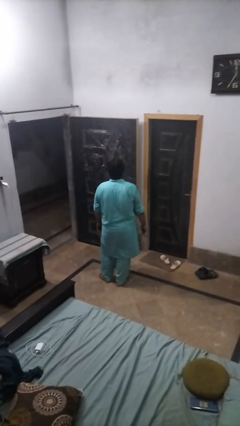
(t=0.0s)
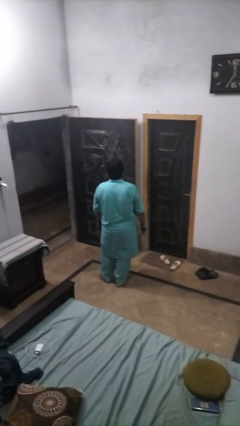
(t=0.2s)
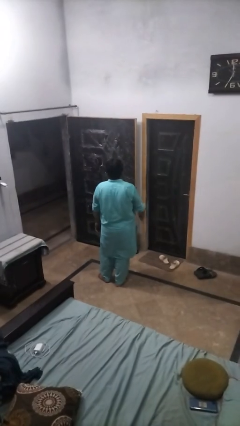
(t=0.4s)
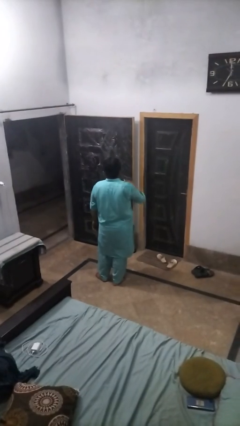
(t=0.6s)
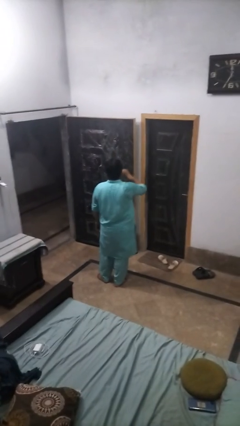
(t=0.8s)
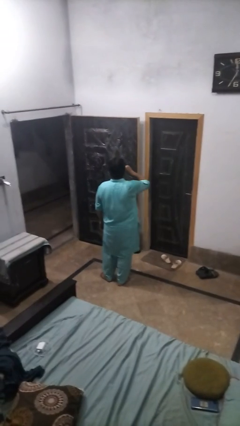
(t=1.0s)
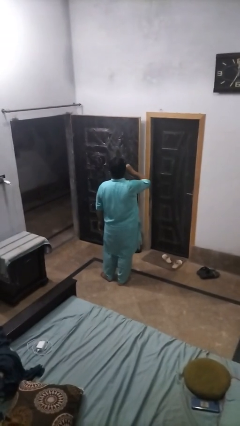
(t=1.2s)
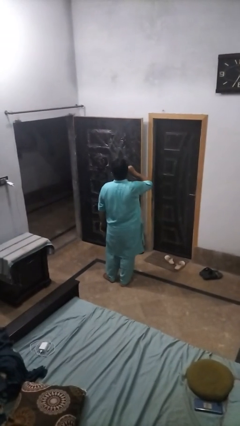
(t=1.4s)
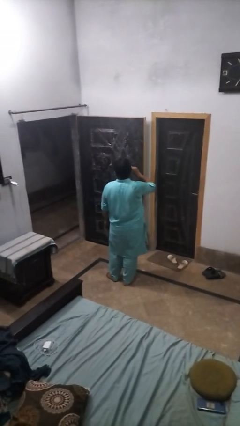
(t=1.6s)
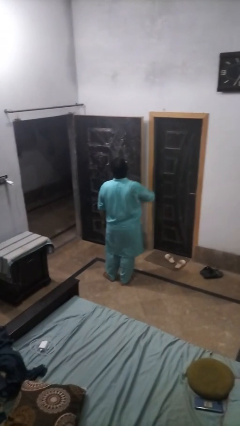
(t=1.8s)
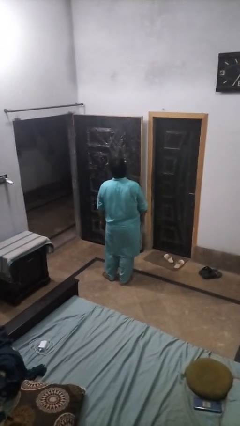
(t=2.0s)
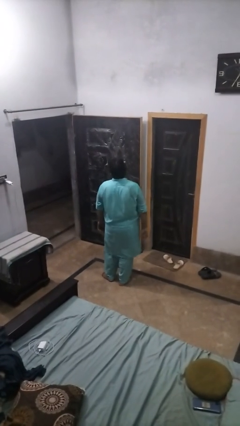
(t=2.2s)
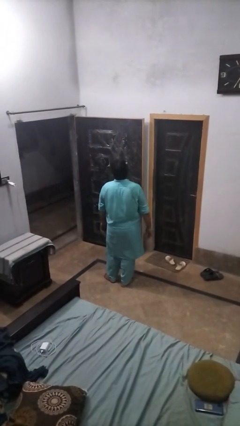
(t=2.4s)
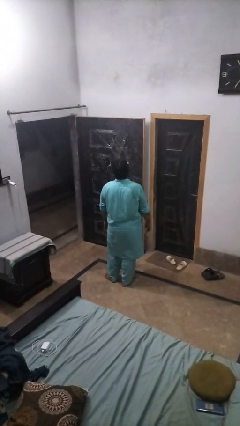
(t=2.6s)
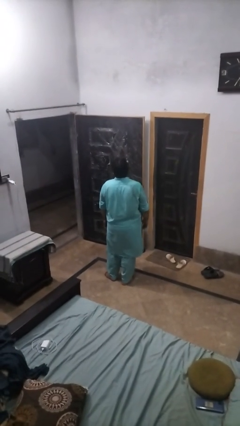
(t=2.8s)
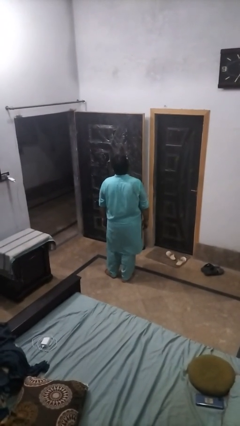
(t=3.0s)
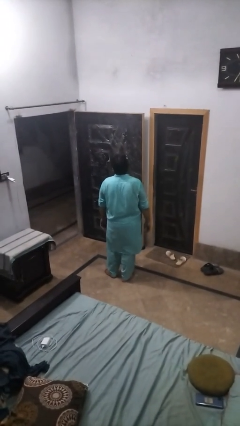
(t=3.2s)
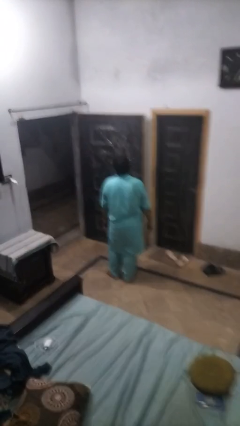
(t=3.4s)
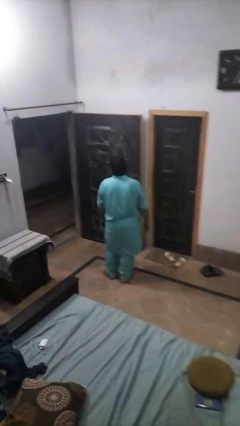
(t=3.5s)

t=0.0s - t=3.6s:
person vapes

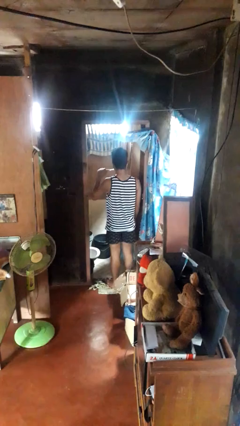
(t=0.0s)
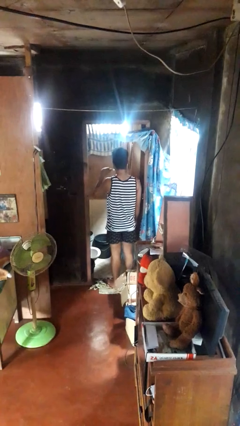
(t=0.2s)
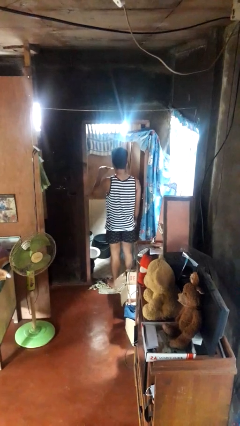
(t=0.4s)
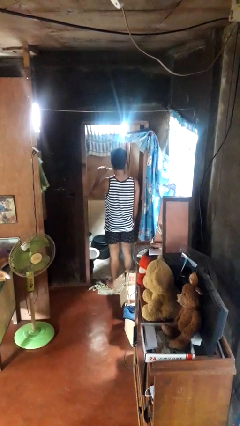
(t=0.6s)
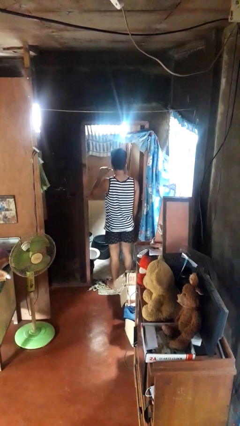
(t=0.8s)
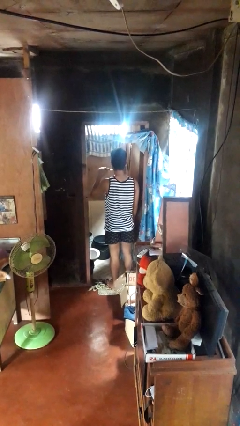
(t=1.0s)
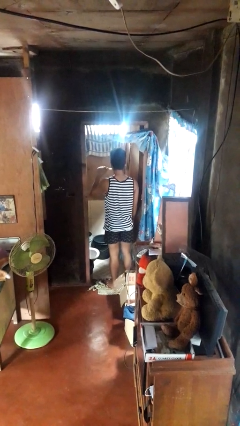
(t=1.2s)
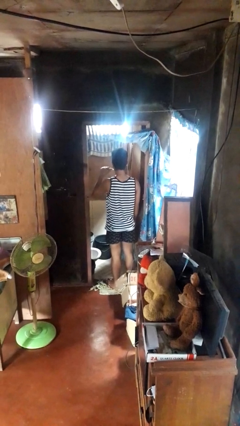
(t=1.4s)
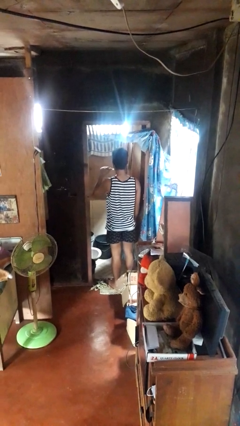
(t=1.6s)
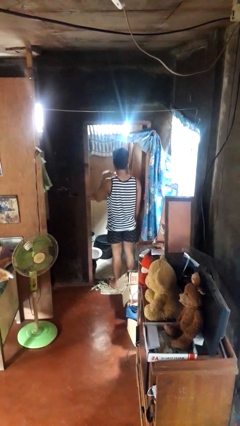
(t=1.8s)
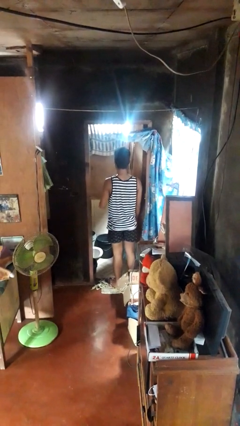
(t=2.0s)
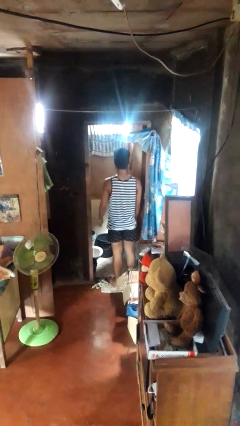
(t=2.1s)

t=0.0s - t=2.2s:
person brushes teeth

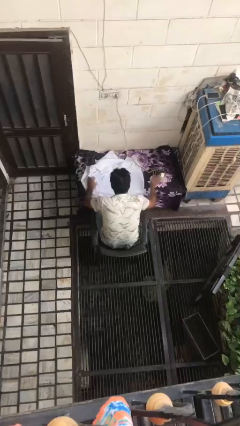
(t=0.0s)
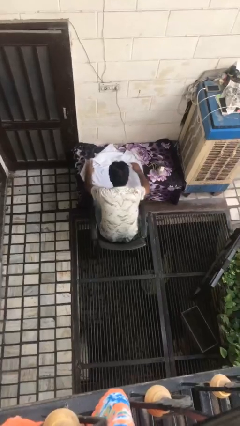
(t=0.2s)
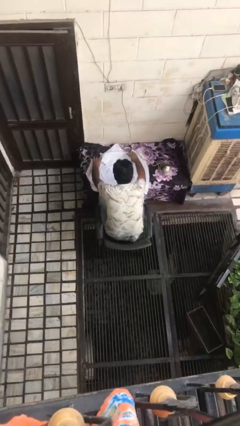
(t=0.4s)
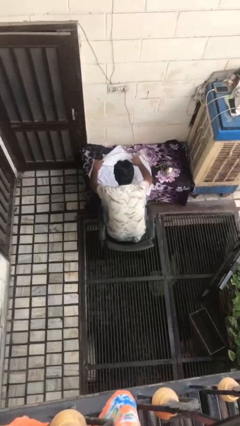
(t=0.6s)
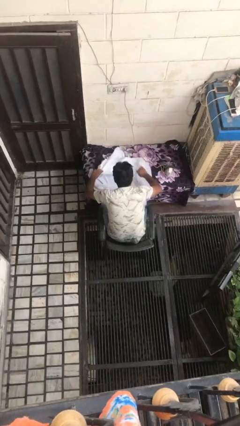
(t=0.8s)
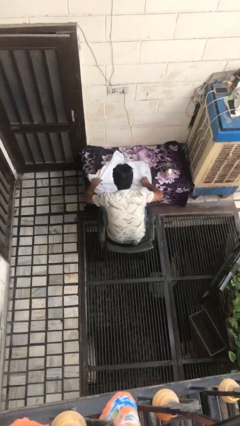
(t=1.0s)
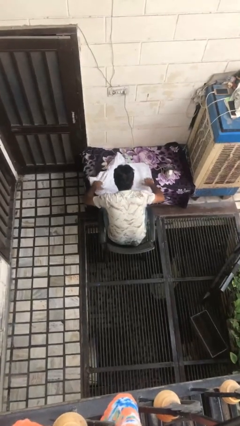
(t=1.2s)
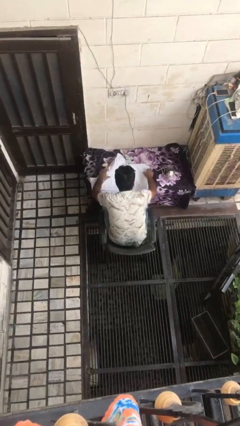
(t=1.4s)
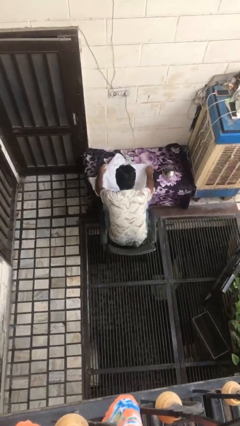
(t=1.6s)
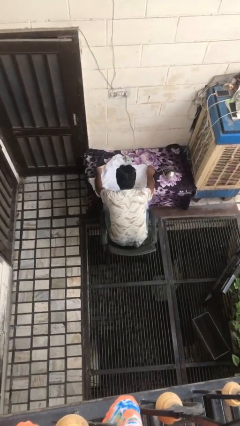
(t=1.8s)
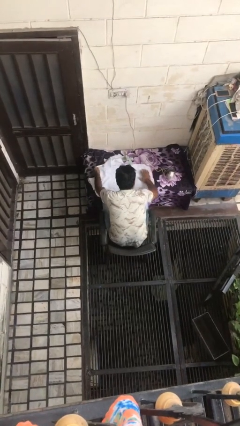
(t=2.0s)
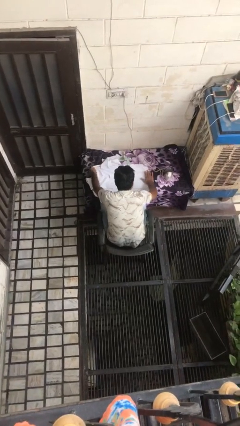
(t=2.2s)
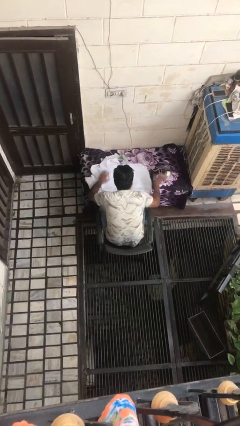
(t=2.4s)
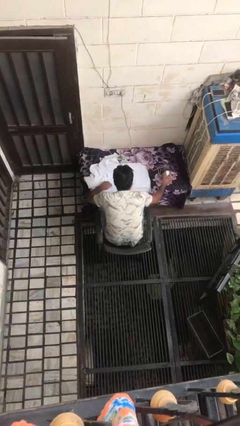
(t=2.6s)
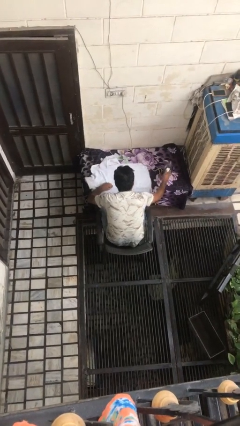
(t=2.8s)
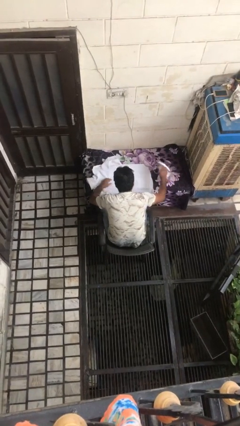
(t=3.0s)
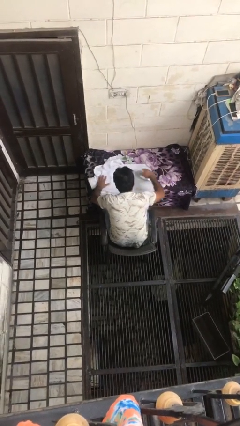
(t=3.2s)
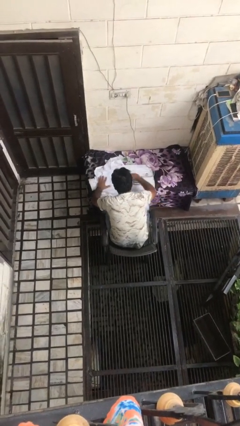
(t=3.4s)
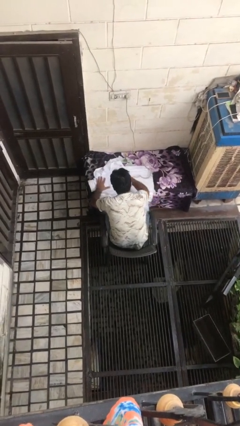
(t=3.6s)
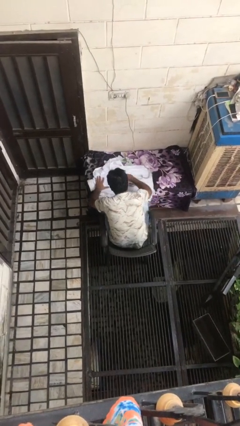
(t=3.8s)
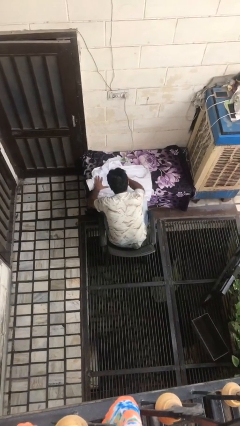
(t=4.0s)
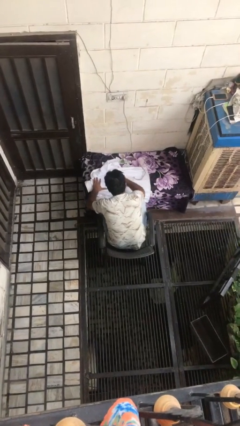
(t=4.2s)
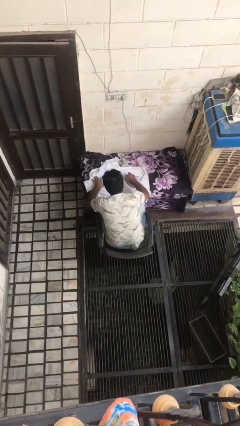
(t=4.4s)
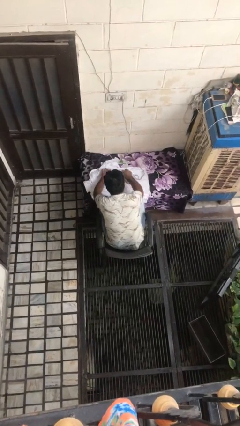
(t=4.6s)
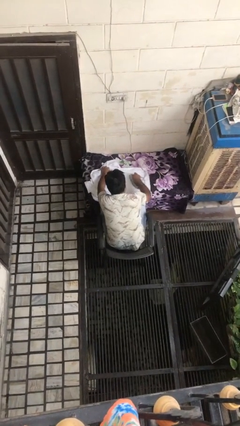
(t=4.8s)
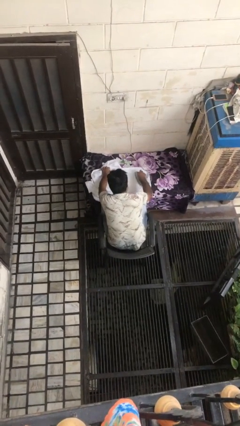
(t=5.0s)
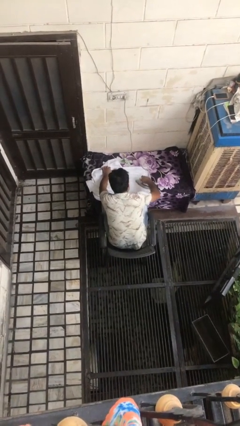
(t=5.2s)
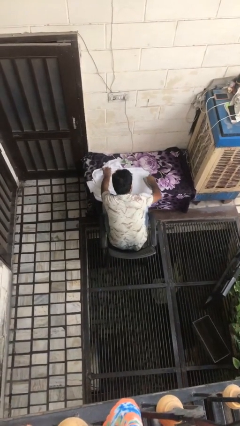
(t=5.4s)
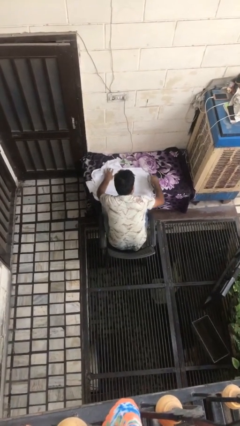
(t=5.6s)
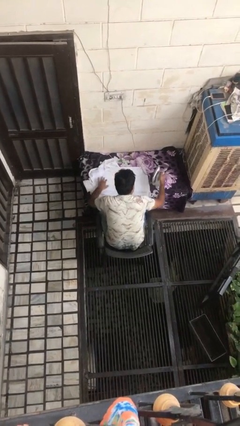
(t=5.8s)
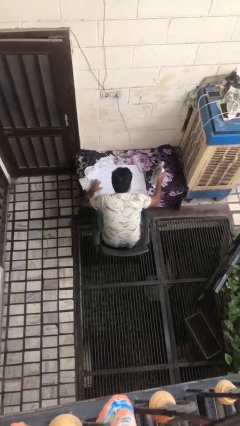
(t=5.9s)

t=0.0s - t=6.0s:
person irons clothes

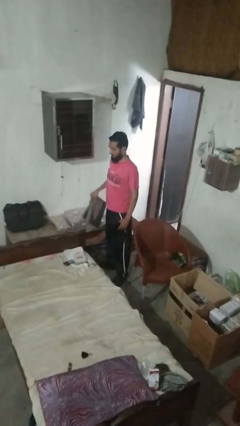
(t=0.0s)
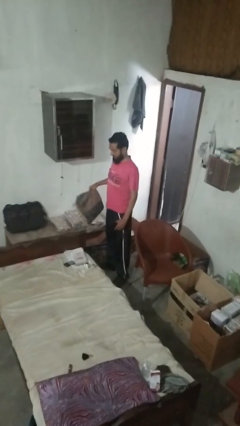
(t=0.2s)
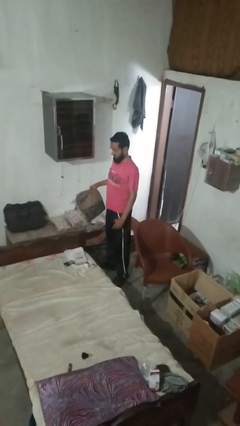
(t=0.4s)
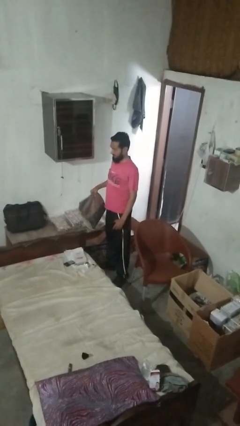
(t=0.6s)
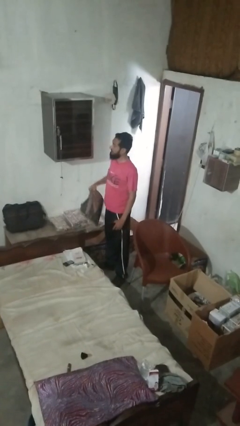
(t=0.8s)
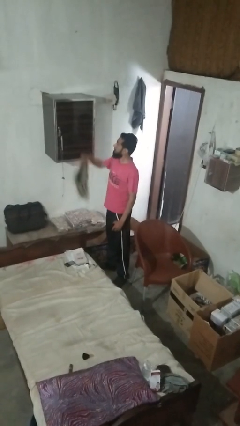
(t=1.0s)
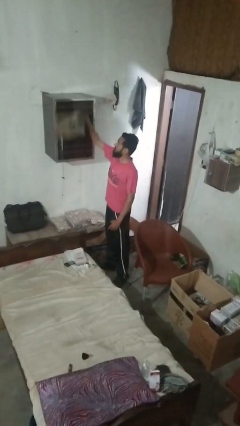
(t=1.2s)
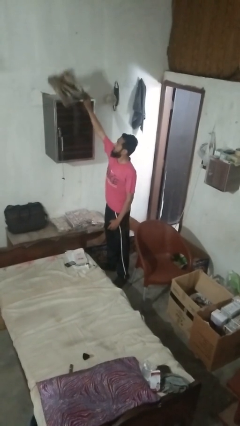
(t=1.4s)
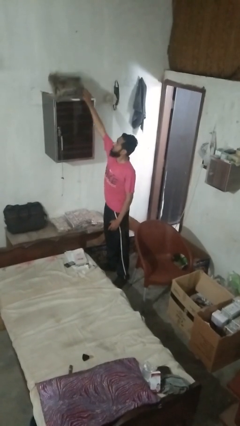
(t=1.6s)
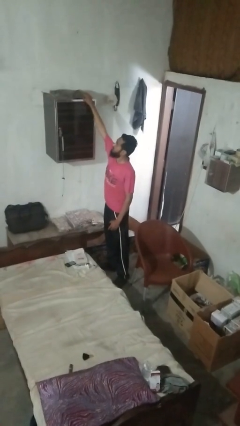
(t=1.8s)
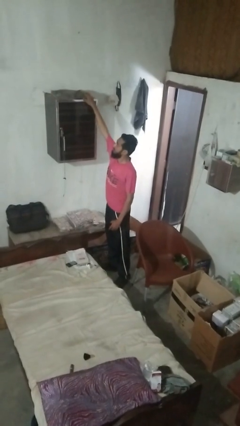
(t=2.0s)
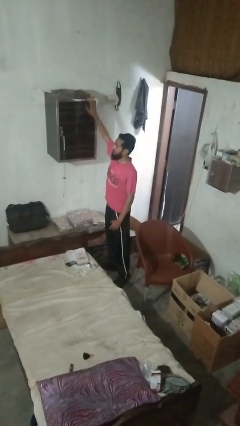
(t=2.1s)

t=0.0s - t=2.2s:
person puts down object on shelf

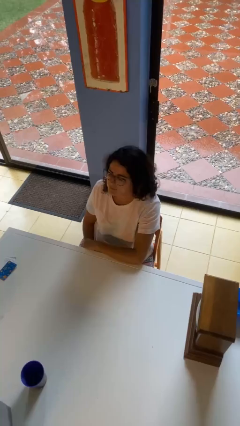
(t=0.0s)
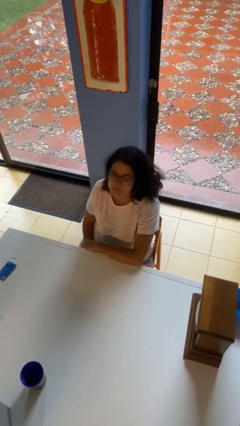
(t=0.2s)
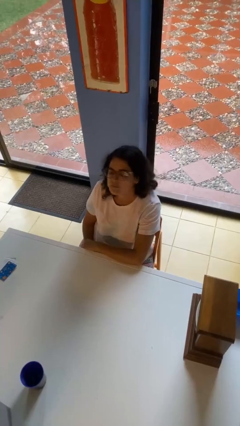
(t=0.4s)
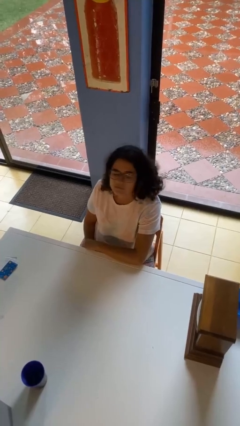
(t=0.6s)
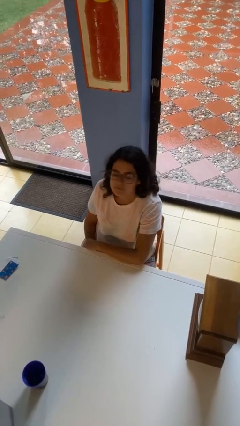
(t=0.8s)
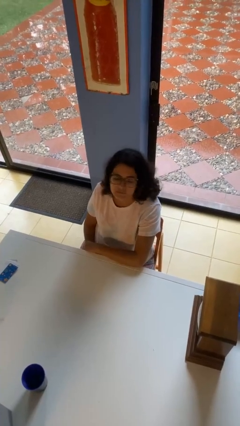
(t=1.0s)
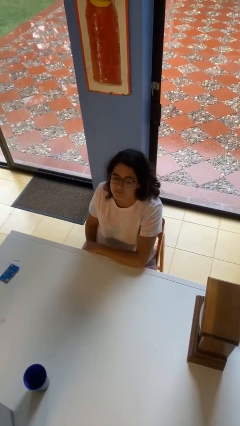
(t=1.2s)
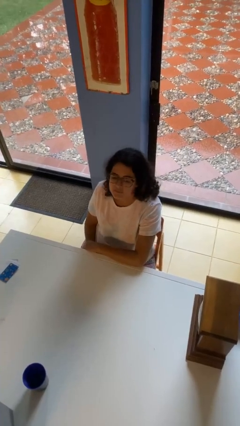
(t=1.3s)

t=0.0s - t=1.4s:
person shakes head

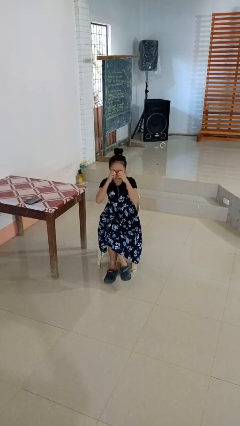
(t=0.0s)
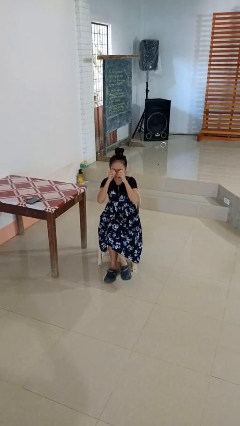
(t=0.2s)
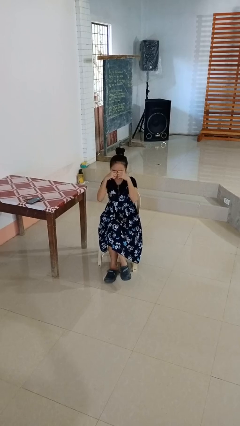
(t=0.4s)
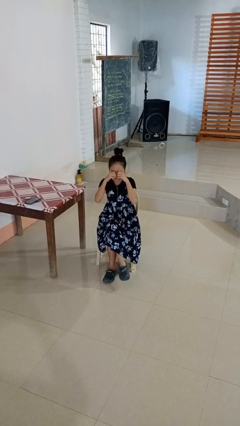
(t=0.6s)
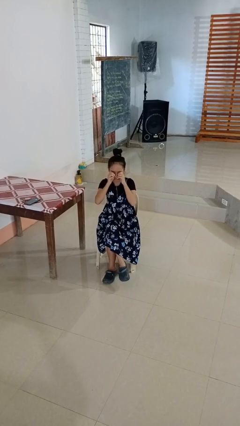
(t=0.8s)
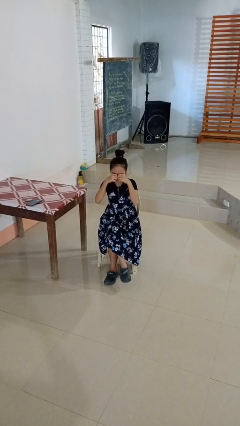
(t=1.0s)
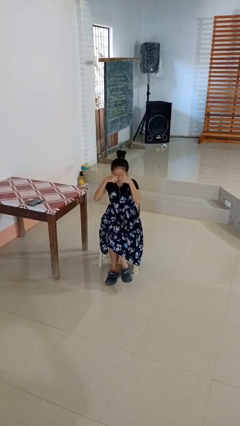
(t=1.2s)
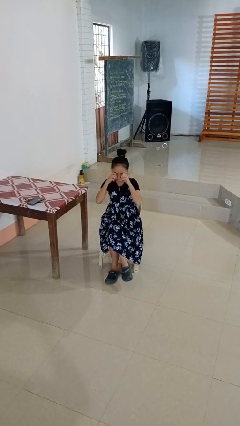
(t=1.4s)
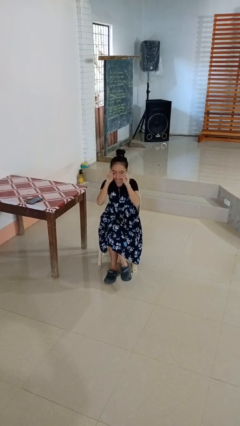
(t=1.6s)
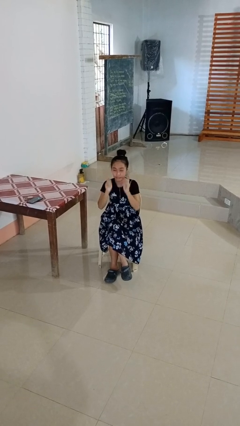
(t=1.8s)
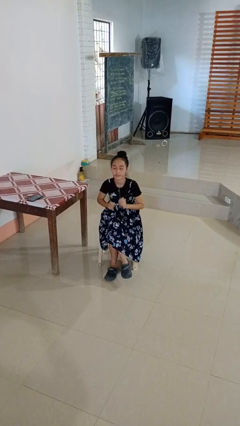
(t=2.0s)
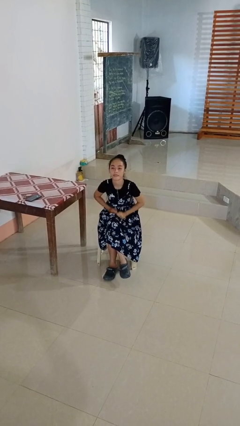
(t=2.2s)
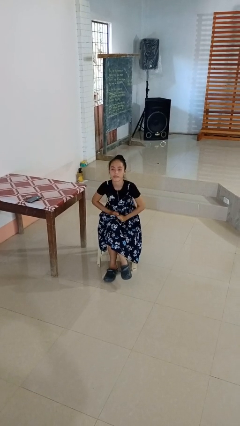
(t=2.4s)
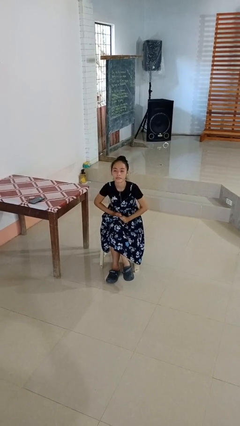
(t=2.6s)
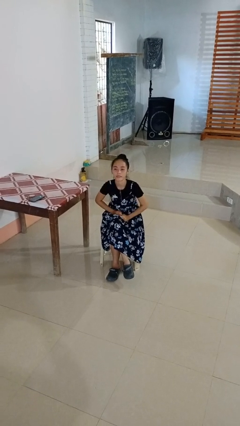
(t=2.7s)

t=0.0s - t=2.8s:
person rubs eyes
